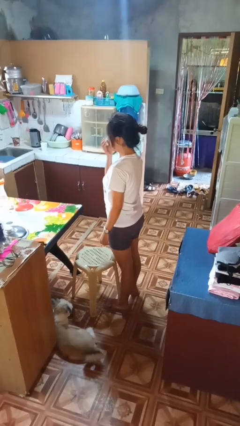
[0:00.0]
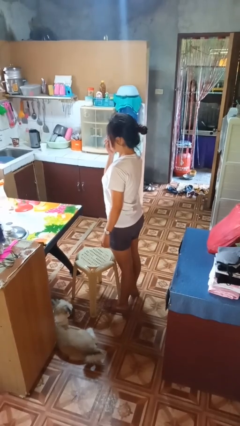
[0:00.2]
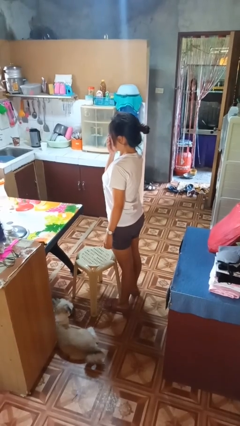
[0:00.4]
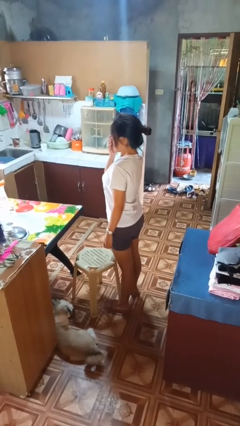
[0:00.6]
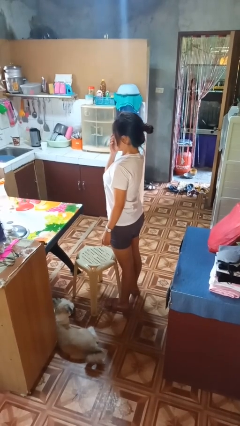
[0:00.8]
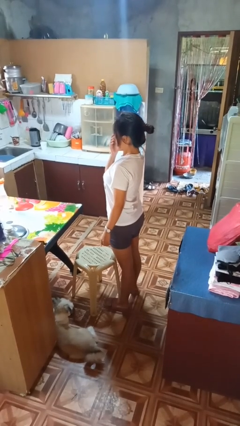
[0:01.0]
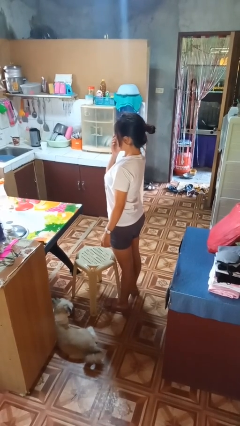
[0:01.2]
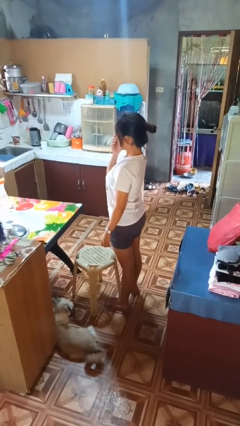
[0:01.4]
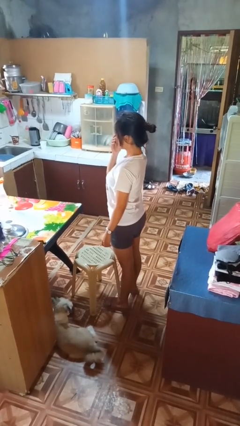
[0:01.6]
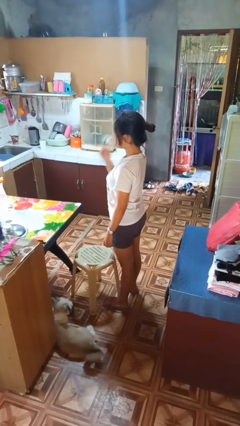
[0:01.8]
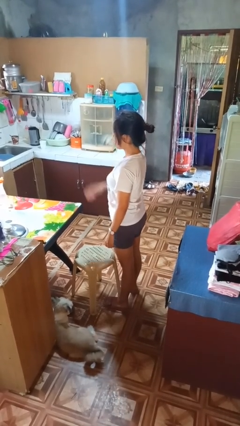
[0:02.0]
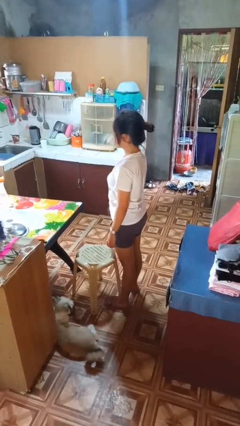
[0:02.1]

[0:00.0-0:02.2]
person yawns

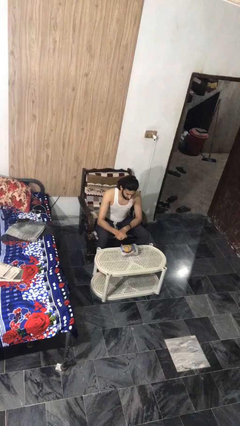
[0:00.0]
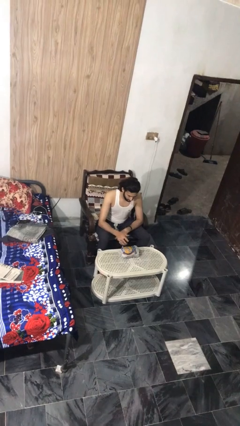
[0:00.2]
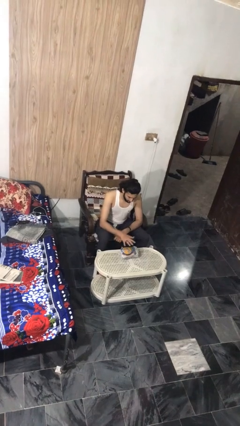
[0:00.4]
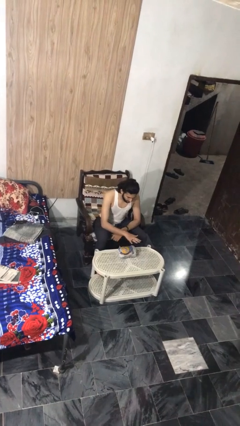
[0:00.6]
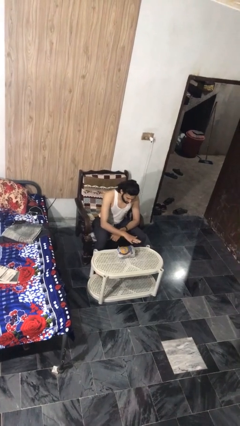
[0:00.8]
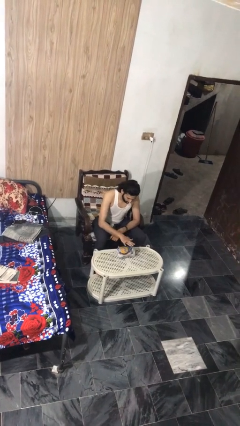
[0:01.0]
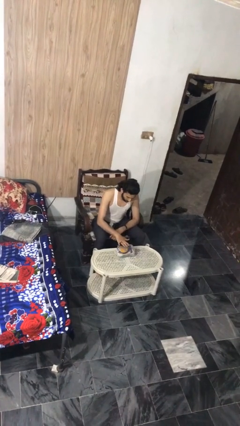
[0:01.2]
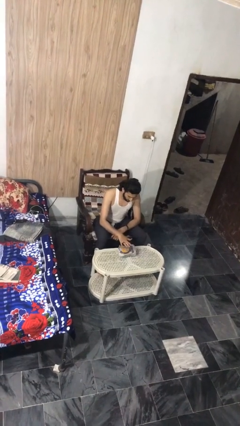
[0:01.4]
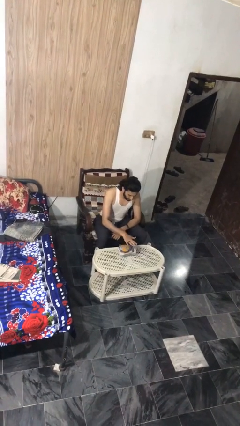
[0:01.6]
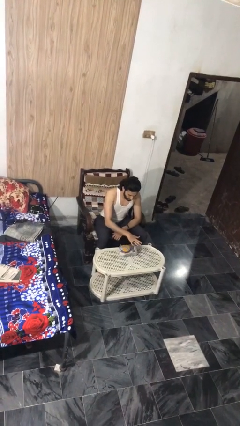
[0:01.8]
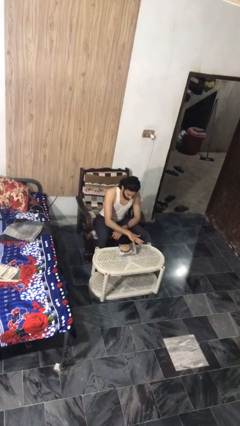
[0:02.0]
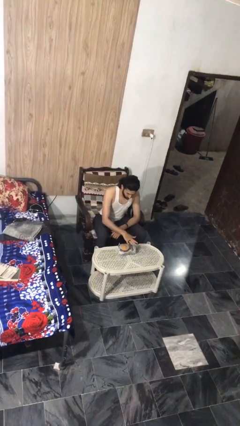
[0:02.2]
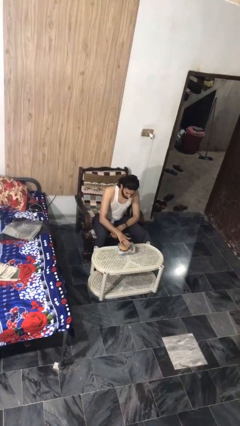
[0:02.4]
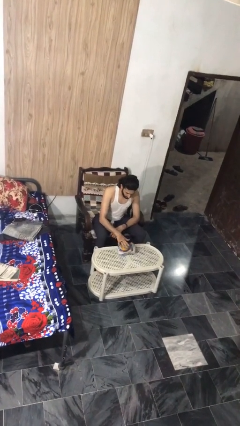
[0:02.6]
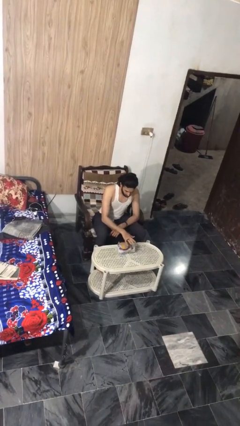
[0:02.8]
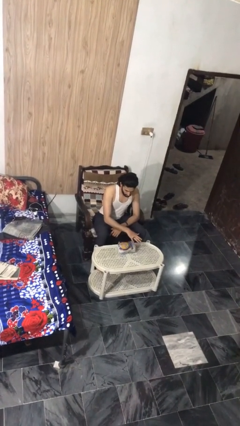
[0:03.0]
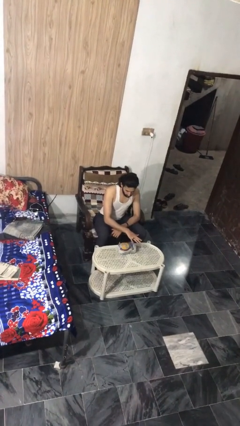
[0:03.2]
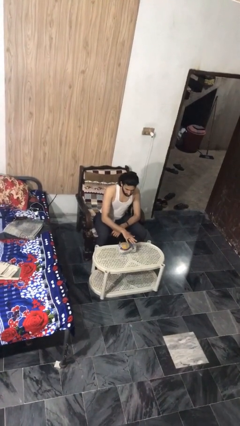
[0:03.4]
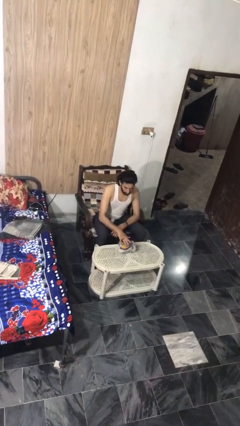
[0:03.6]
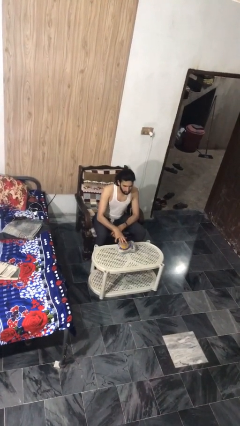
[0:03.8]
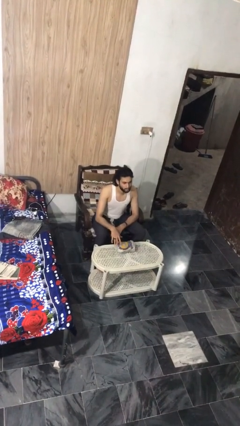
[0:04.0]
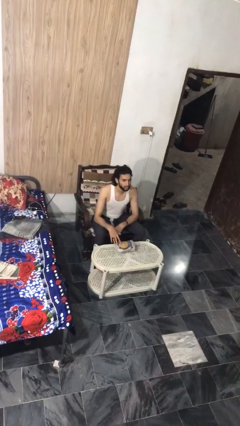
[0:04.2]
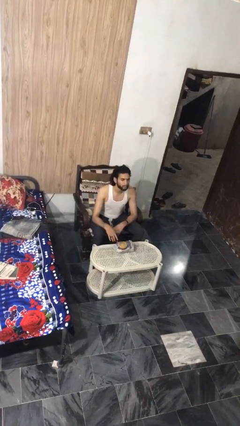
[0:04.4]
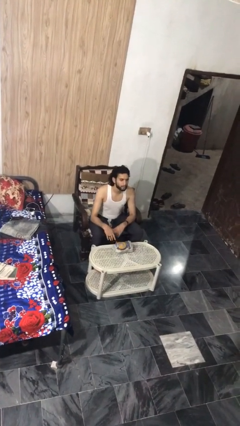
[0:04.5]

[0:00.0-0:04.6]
person waves hand over object

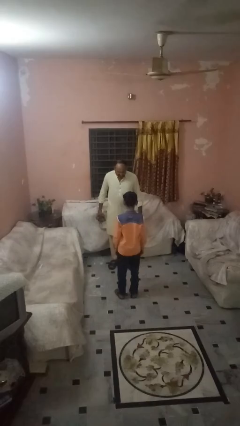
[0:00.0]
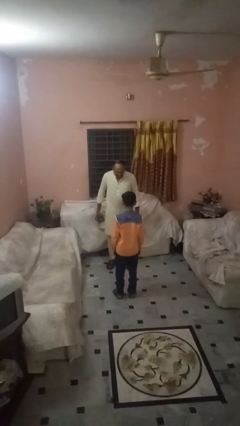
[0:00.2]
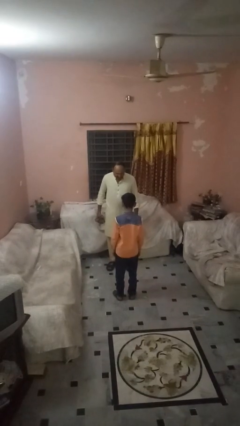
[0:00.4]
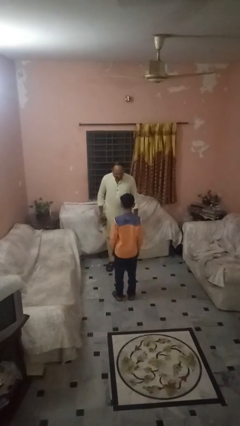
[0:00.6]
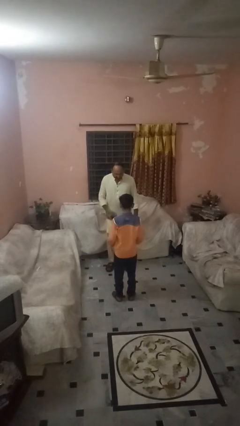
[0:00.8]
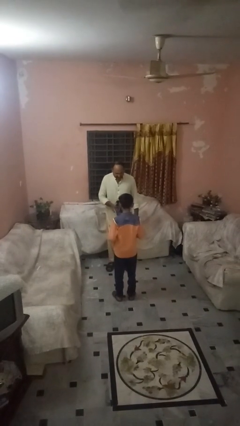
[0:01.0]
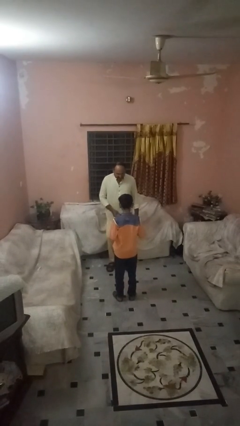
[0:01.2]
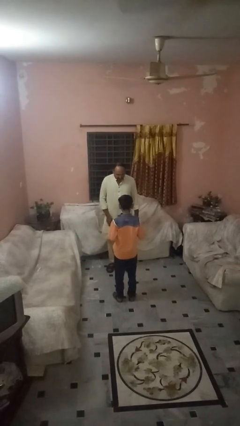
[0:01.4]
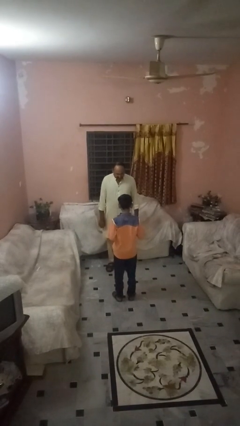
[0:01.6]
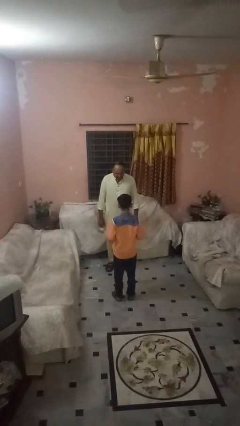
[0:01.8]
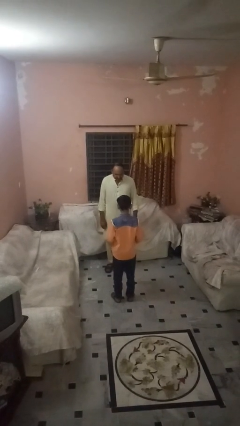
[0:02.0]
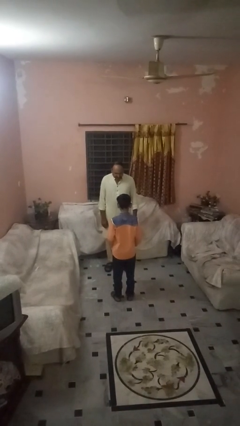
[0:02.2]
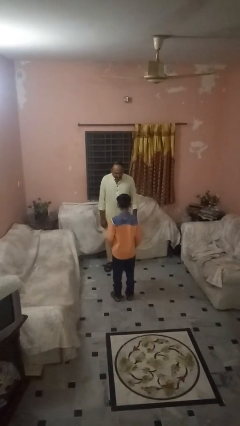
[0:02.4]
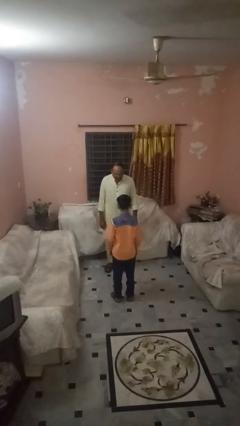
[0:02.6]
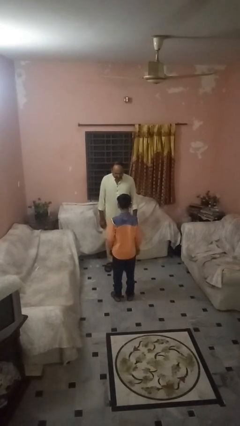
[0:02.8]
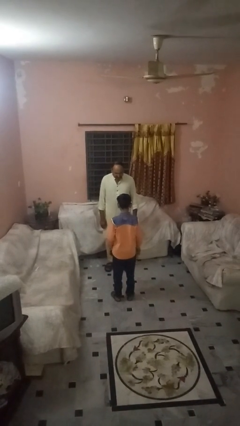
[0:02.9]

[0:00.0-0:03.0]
person throws object to person

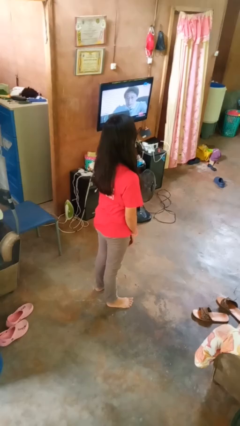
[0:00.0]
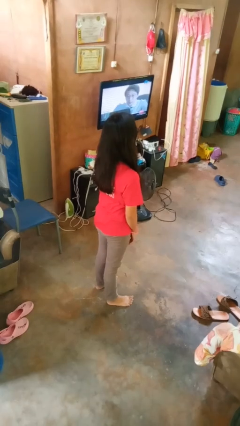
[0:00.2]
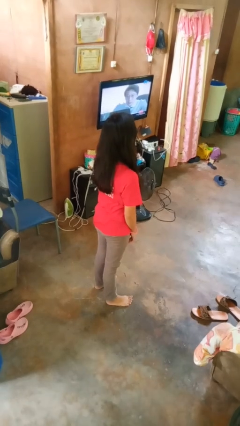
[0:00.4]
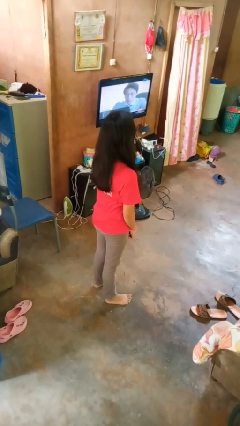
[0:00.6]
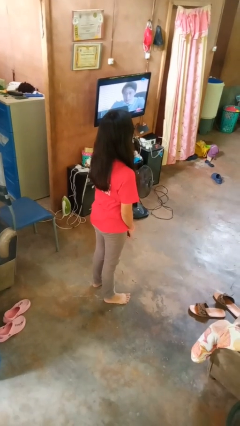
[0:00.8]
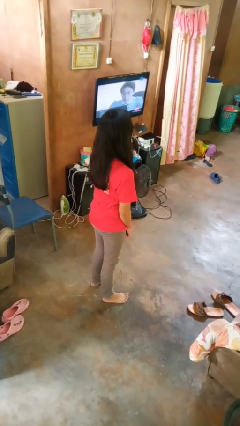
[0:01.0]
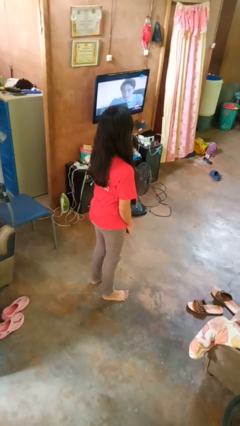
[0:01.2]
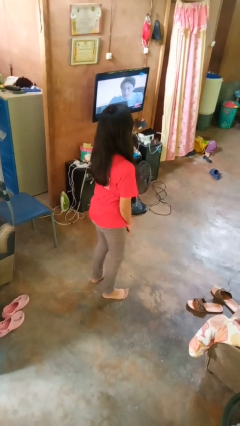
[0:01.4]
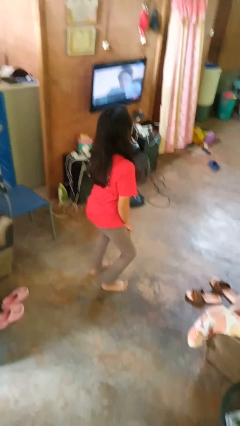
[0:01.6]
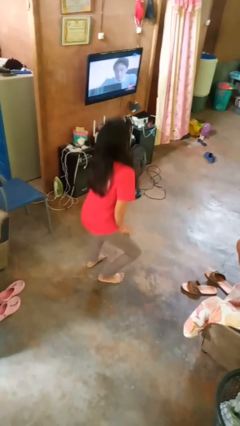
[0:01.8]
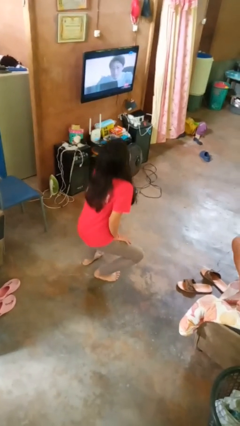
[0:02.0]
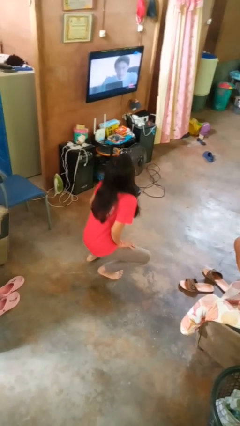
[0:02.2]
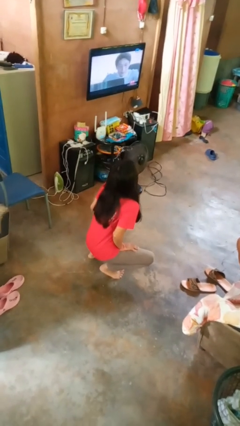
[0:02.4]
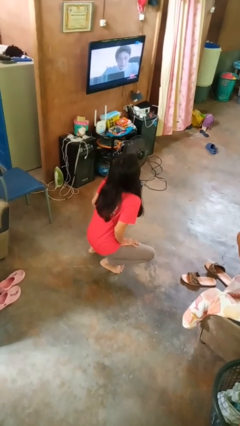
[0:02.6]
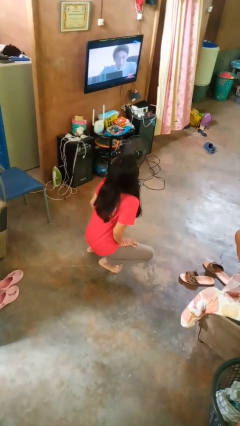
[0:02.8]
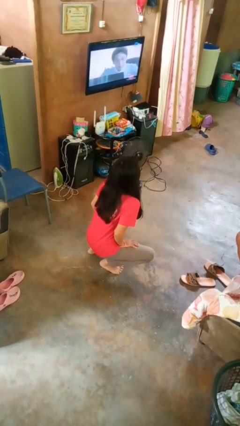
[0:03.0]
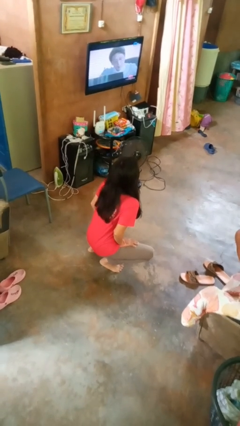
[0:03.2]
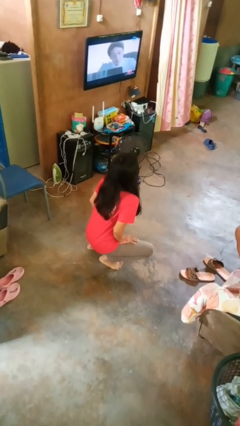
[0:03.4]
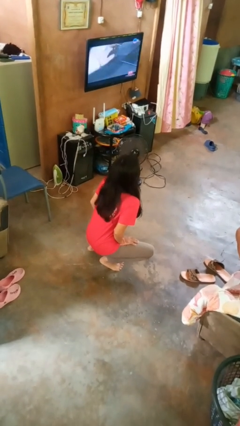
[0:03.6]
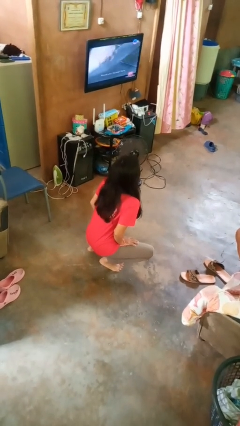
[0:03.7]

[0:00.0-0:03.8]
person squats

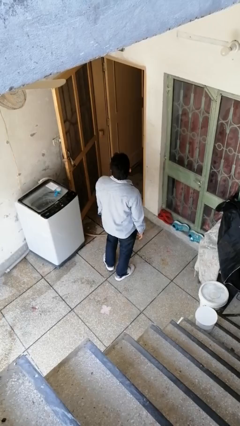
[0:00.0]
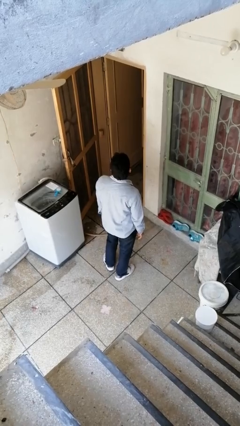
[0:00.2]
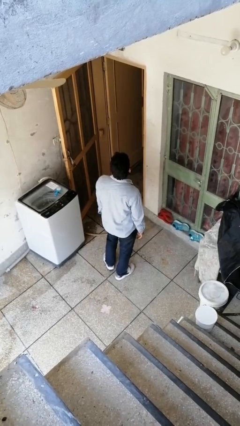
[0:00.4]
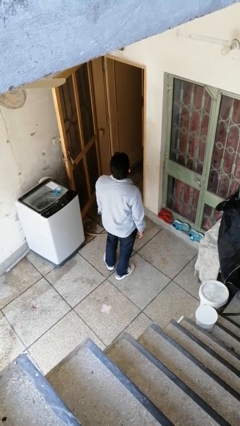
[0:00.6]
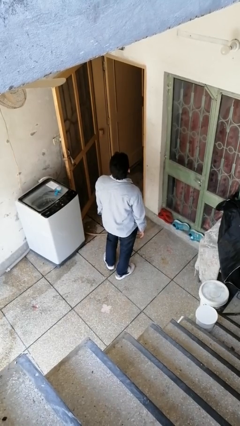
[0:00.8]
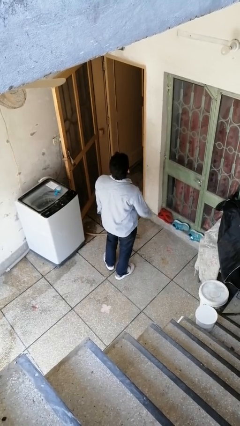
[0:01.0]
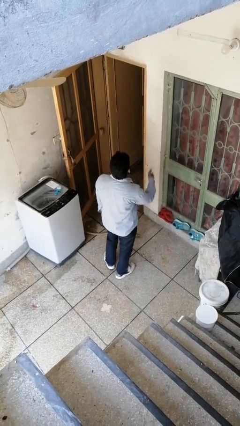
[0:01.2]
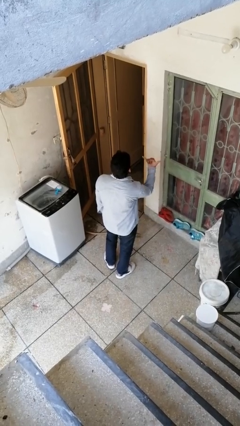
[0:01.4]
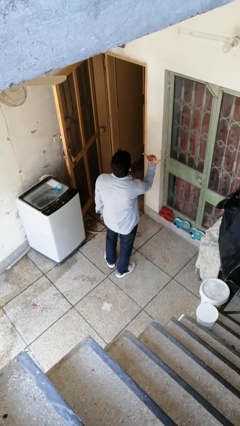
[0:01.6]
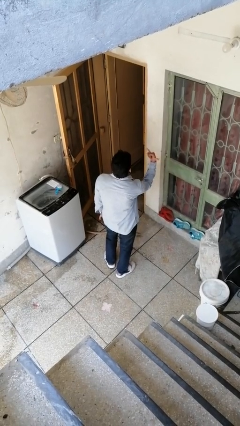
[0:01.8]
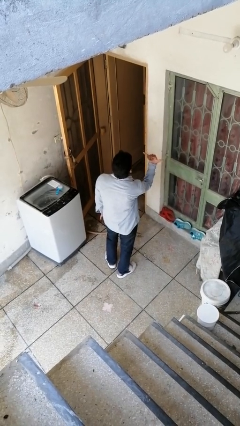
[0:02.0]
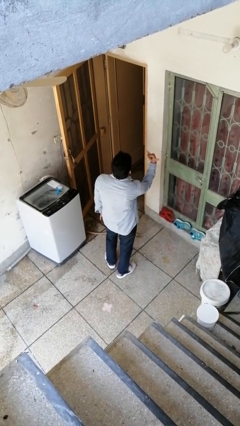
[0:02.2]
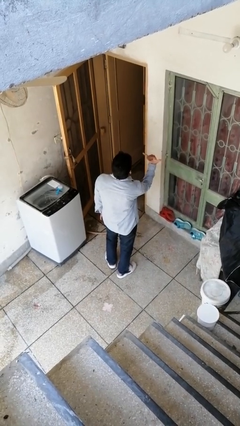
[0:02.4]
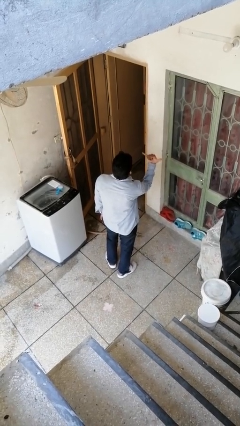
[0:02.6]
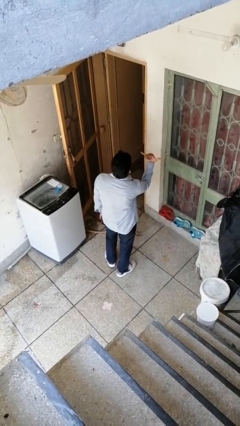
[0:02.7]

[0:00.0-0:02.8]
person gestures hang loose

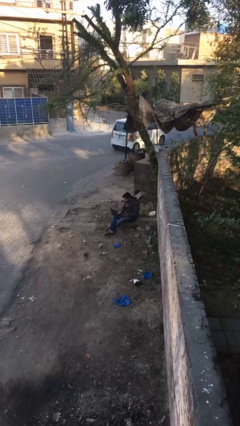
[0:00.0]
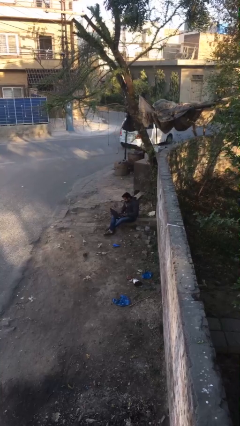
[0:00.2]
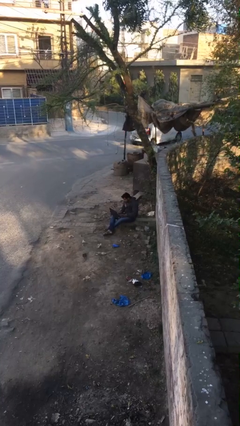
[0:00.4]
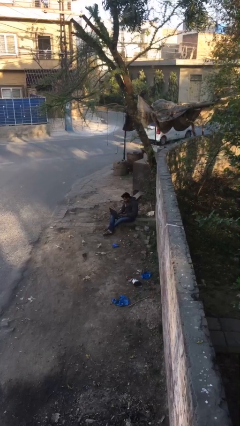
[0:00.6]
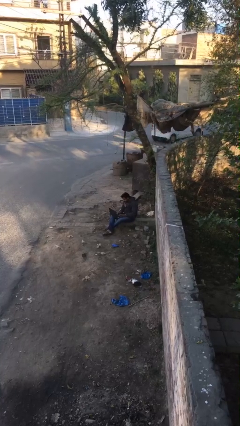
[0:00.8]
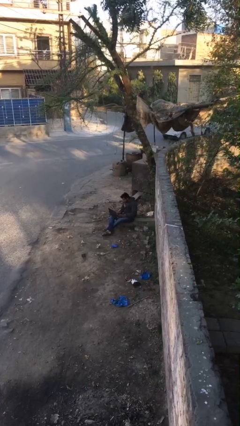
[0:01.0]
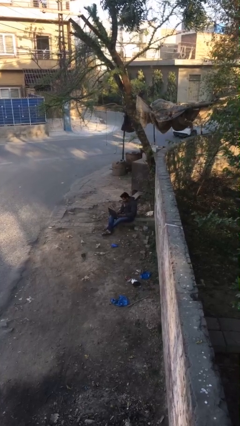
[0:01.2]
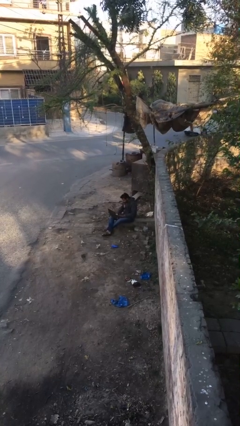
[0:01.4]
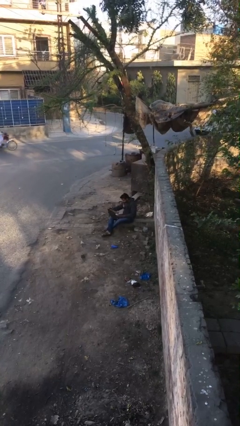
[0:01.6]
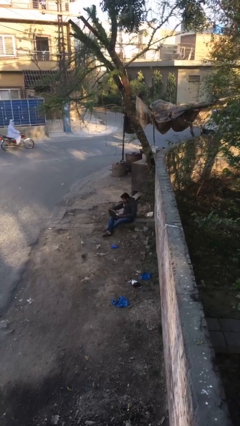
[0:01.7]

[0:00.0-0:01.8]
person interacts with laptop
